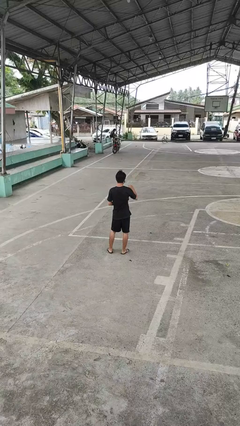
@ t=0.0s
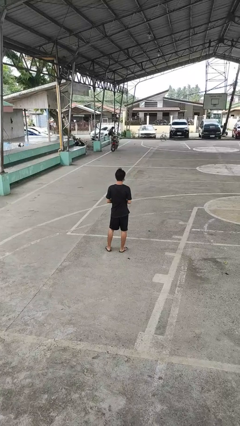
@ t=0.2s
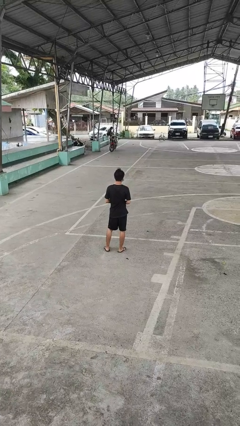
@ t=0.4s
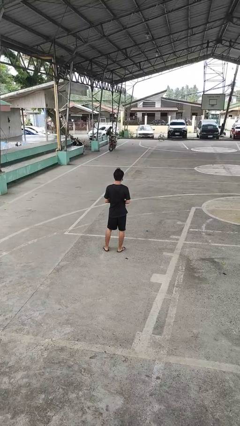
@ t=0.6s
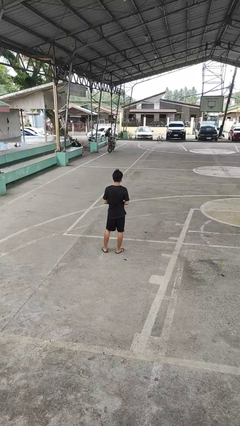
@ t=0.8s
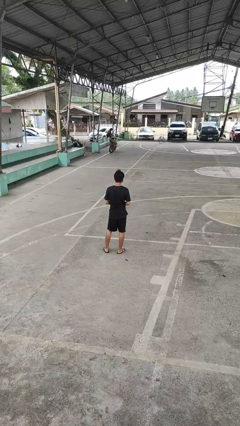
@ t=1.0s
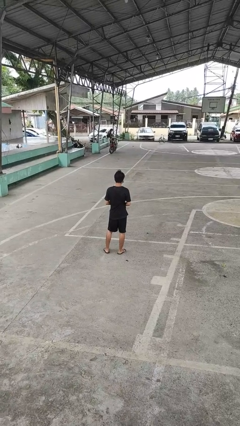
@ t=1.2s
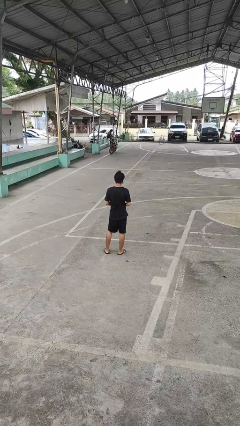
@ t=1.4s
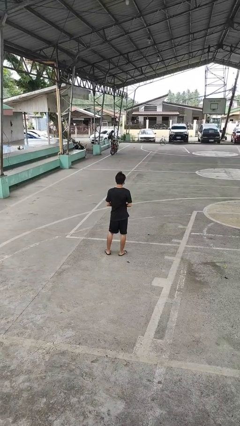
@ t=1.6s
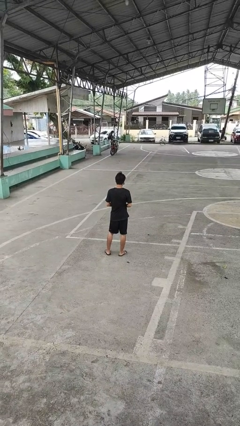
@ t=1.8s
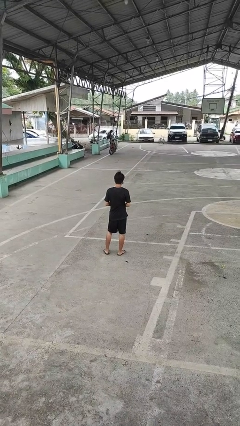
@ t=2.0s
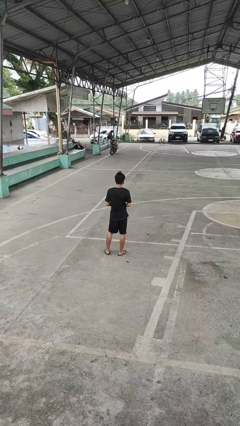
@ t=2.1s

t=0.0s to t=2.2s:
person gestures lower hand

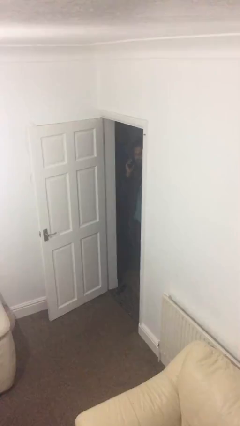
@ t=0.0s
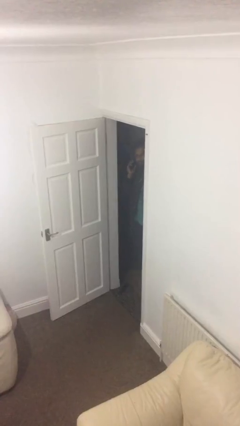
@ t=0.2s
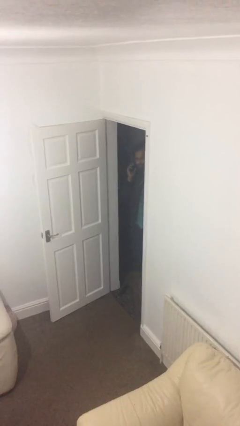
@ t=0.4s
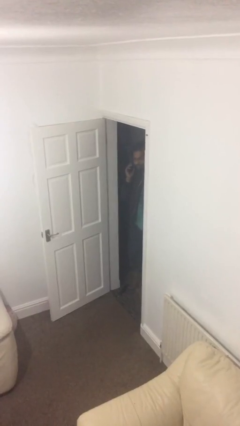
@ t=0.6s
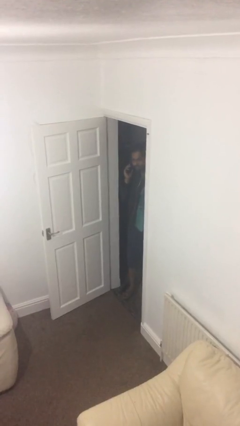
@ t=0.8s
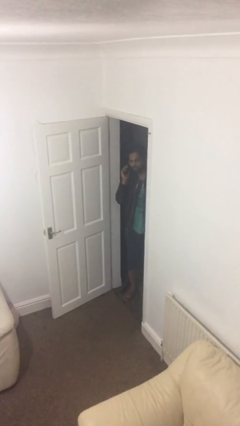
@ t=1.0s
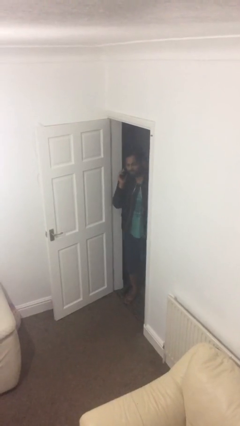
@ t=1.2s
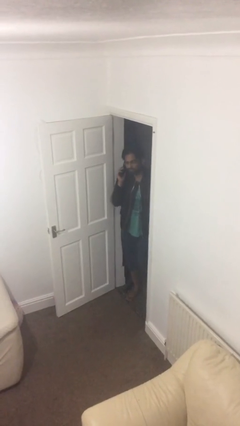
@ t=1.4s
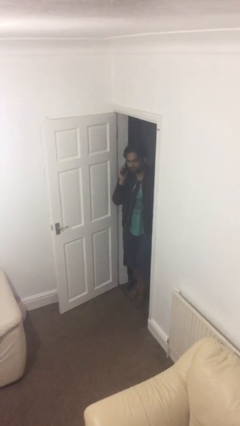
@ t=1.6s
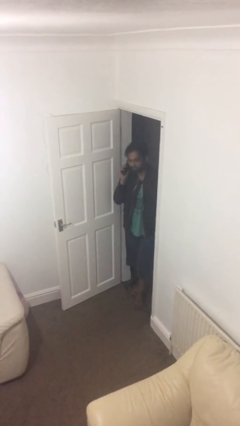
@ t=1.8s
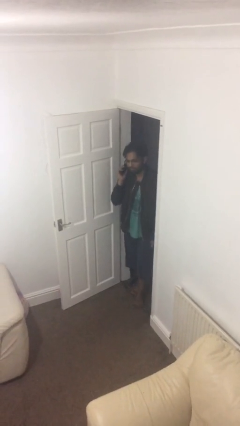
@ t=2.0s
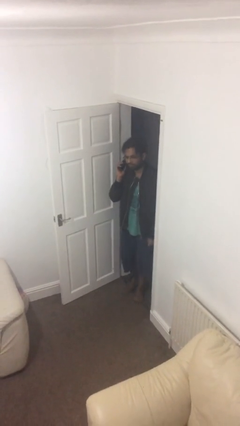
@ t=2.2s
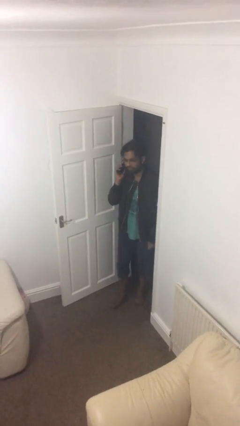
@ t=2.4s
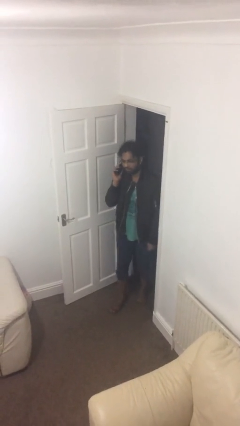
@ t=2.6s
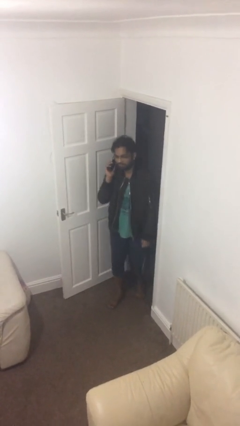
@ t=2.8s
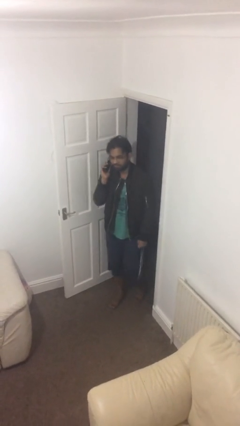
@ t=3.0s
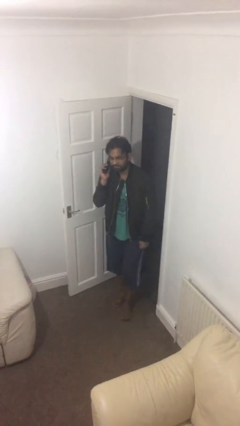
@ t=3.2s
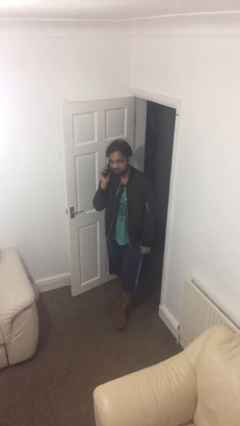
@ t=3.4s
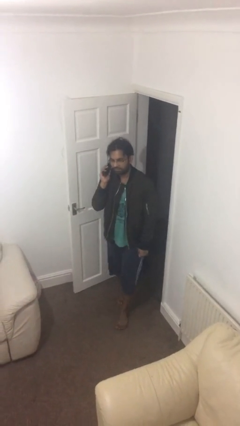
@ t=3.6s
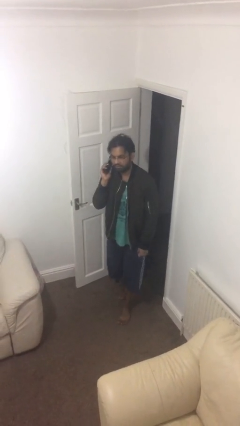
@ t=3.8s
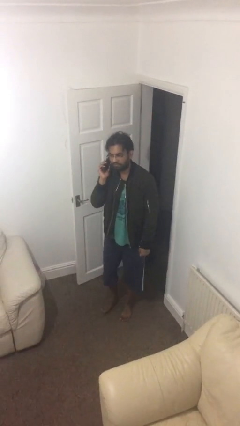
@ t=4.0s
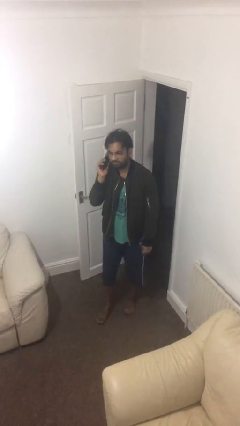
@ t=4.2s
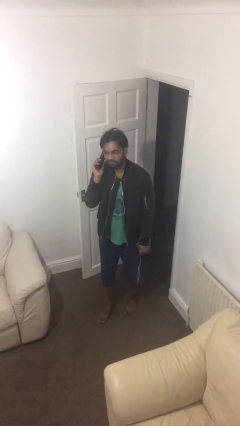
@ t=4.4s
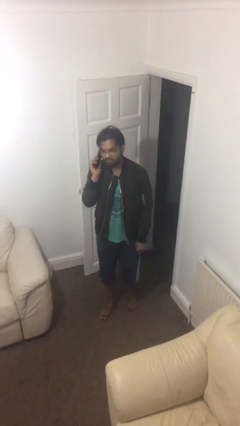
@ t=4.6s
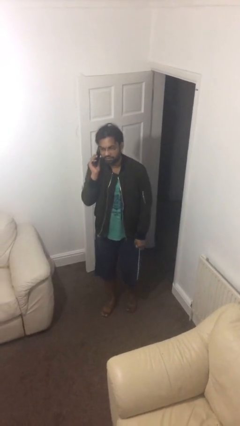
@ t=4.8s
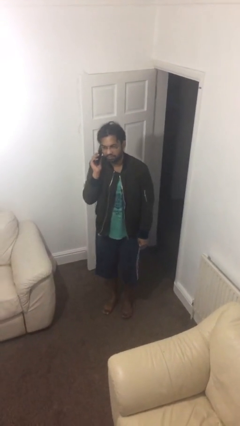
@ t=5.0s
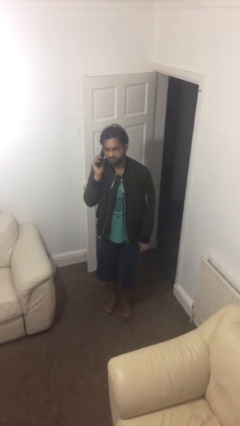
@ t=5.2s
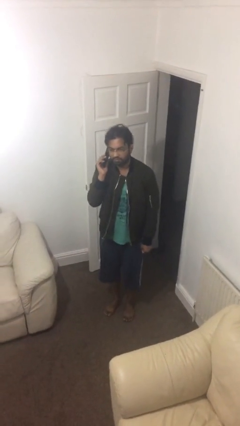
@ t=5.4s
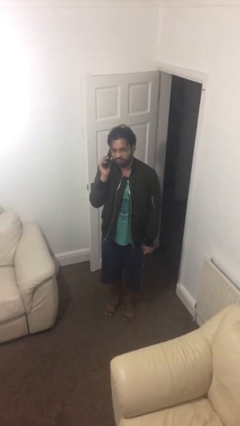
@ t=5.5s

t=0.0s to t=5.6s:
person enters scene through structure

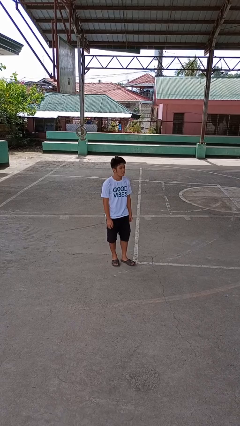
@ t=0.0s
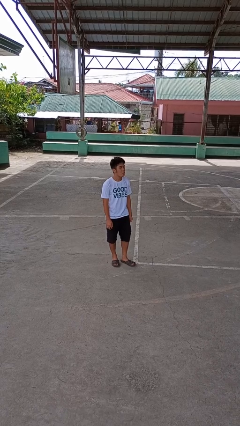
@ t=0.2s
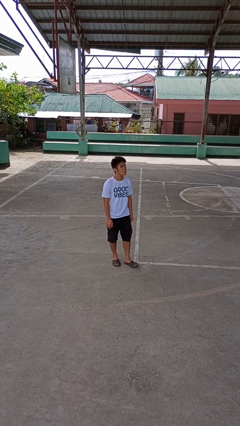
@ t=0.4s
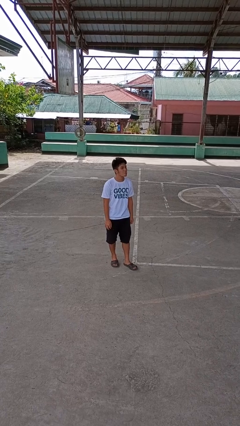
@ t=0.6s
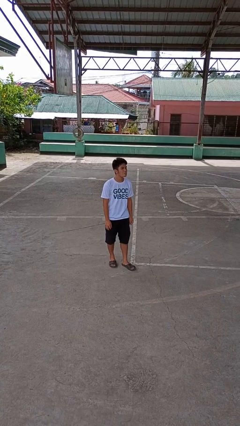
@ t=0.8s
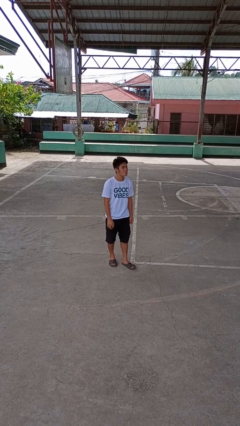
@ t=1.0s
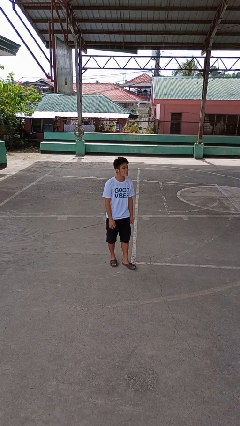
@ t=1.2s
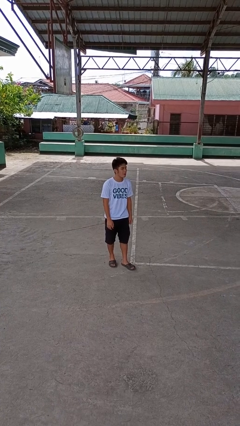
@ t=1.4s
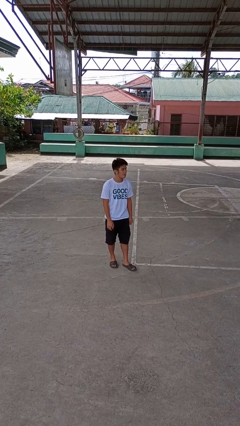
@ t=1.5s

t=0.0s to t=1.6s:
person sticks out tongue

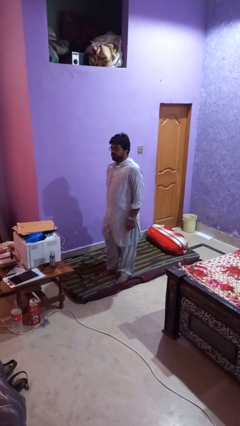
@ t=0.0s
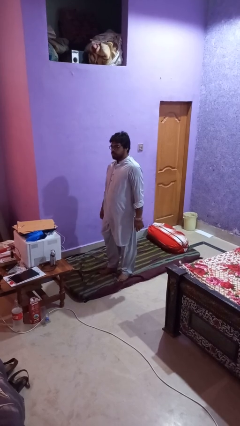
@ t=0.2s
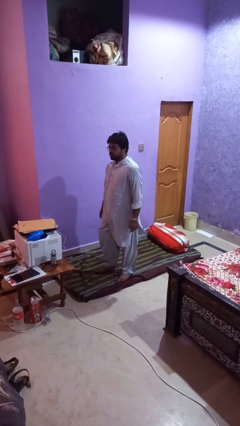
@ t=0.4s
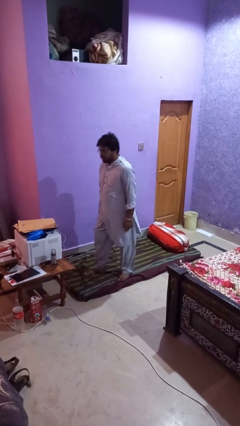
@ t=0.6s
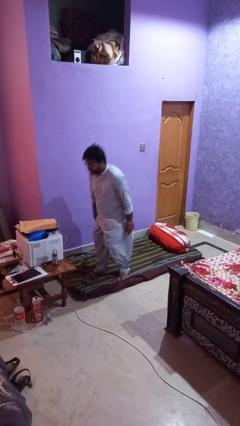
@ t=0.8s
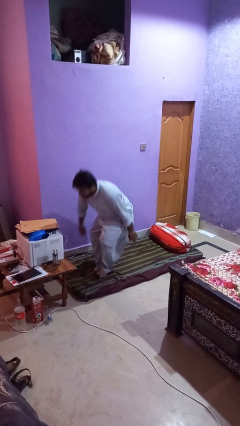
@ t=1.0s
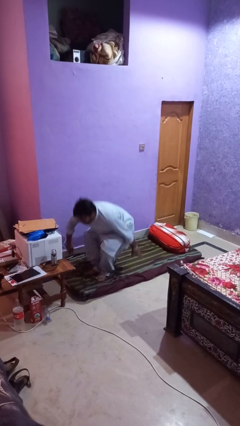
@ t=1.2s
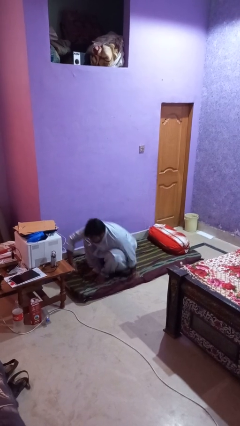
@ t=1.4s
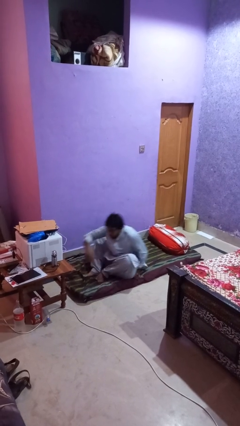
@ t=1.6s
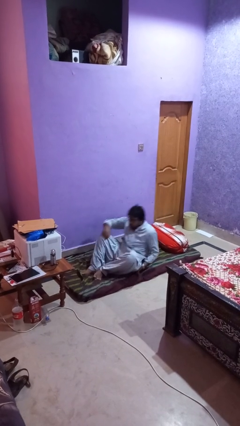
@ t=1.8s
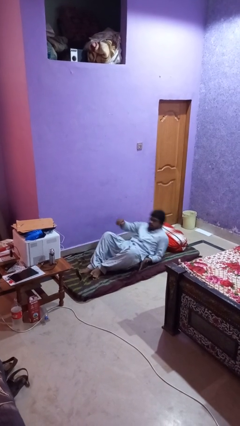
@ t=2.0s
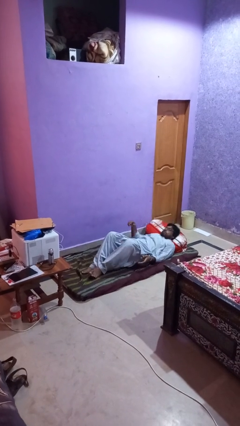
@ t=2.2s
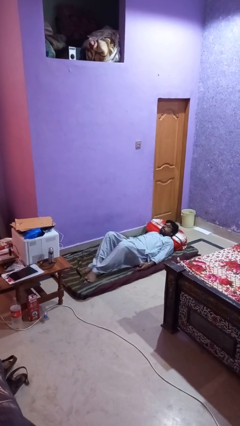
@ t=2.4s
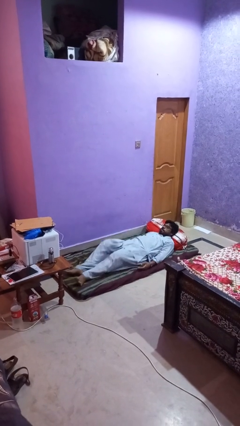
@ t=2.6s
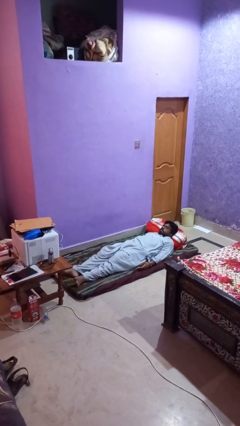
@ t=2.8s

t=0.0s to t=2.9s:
person lies down on bed

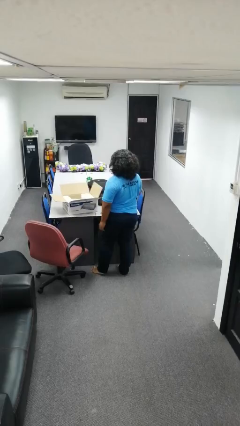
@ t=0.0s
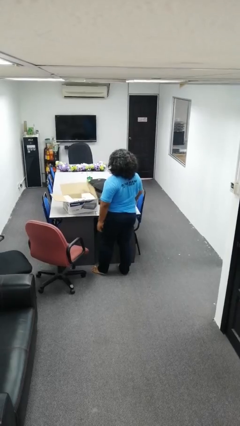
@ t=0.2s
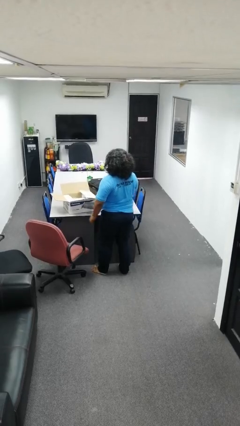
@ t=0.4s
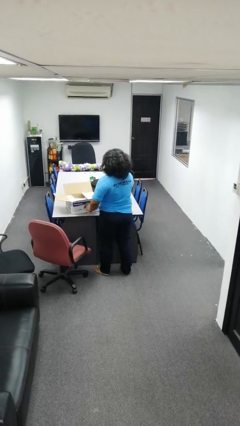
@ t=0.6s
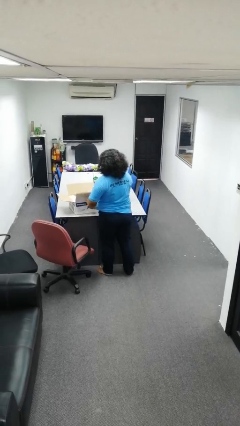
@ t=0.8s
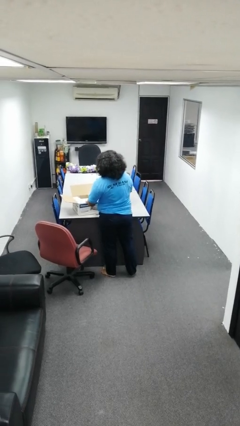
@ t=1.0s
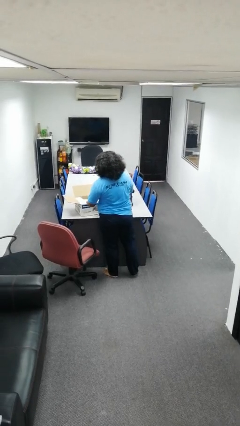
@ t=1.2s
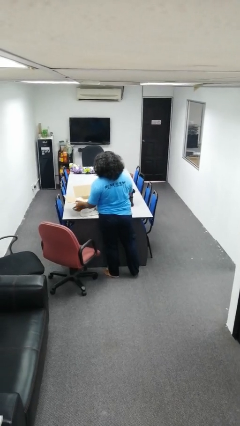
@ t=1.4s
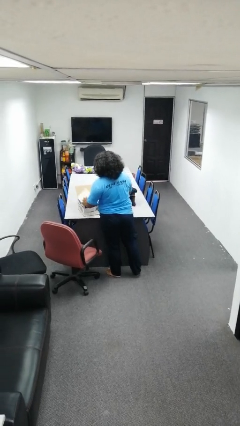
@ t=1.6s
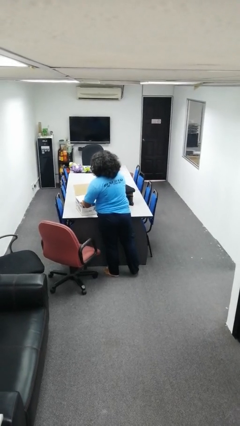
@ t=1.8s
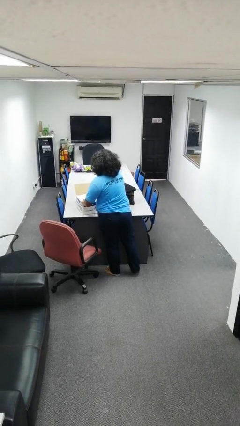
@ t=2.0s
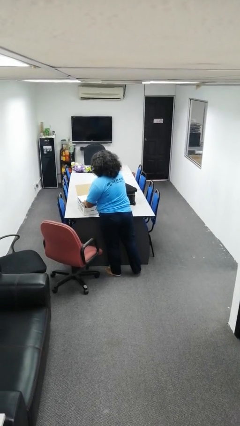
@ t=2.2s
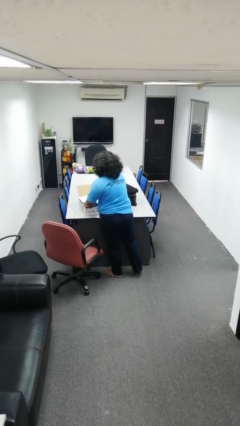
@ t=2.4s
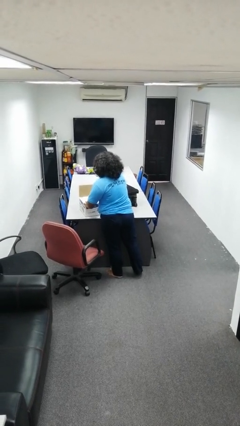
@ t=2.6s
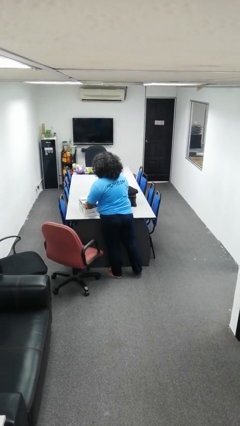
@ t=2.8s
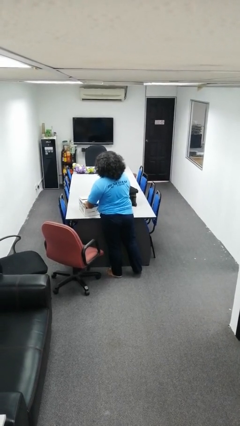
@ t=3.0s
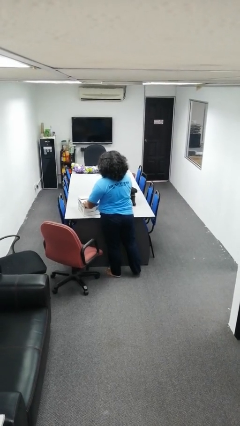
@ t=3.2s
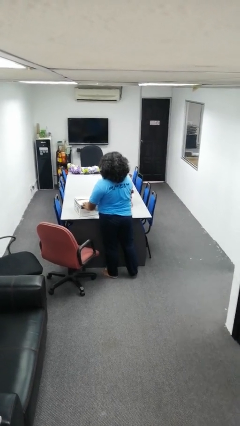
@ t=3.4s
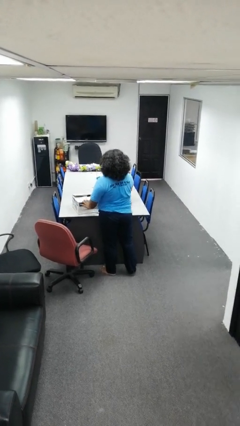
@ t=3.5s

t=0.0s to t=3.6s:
person closes box

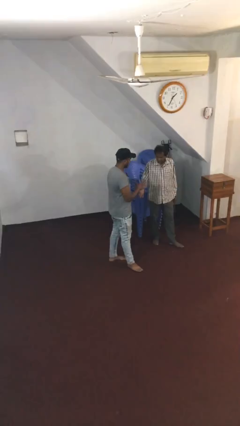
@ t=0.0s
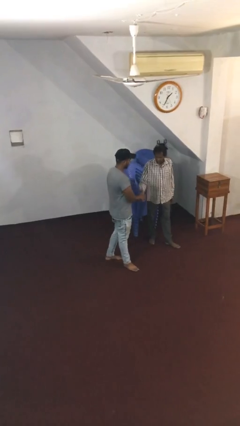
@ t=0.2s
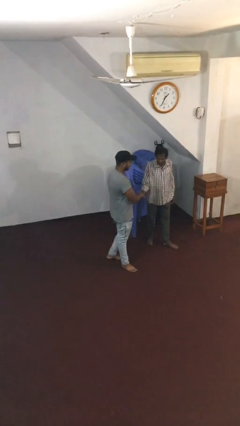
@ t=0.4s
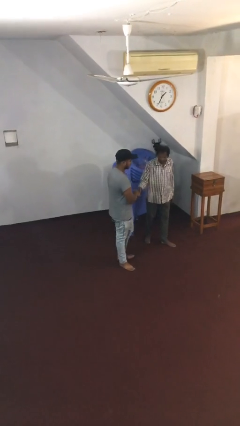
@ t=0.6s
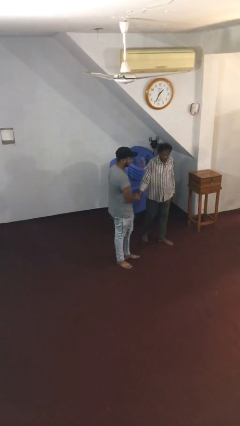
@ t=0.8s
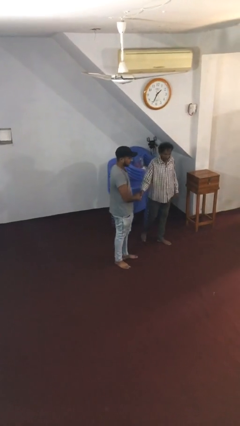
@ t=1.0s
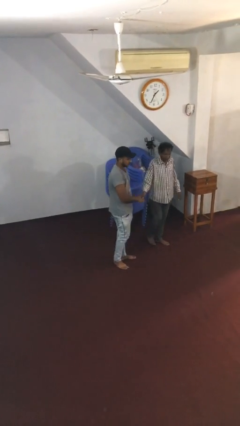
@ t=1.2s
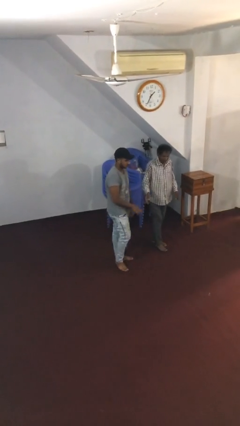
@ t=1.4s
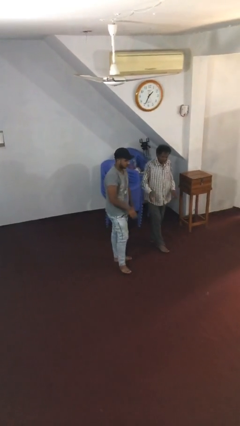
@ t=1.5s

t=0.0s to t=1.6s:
person shakes hand

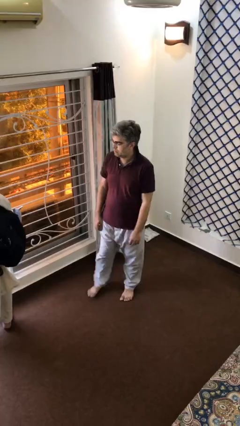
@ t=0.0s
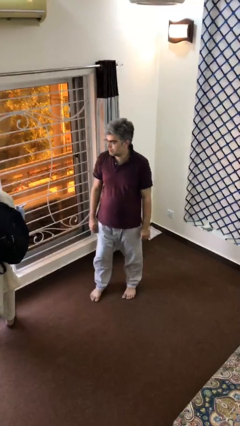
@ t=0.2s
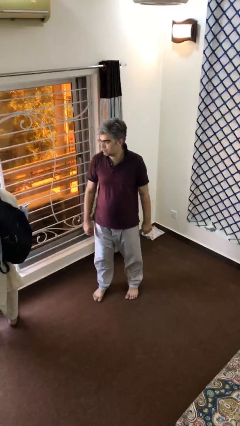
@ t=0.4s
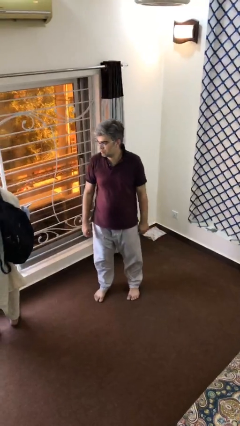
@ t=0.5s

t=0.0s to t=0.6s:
person steals object from person
